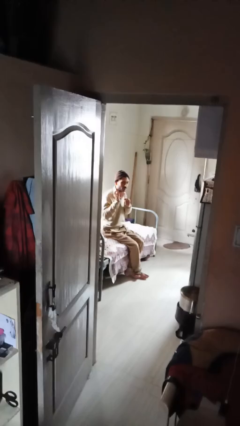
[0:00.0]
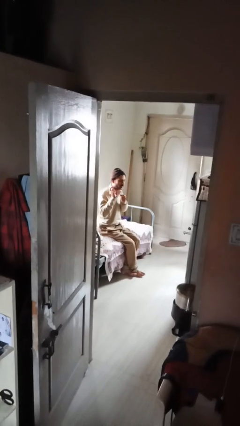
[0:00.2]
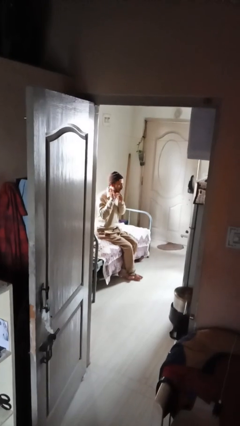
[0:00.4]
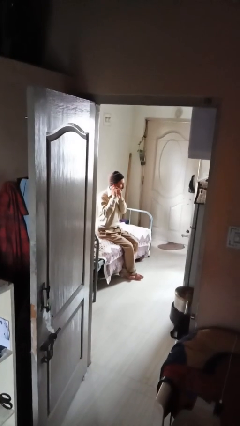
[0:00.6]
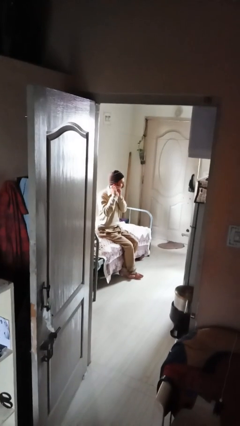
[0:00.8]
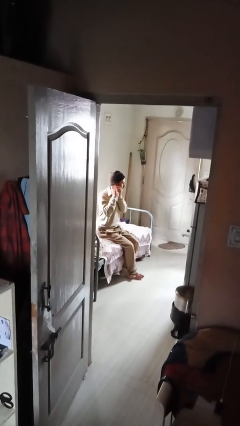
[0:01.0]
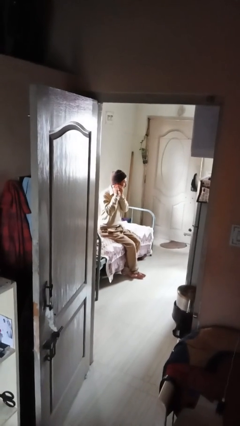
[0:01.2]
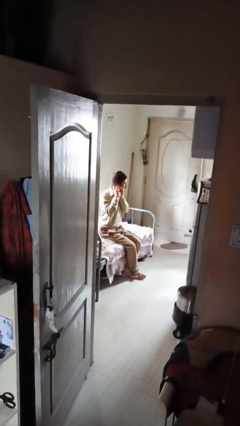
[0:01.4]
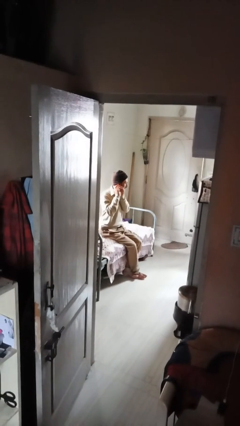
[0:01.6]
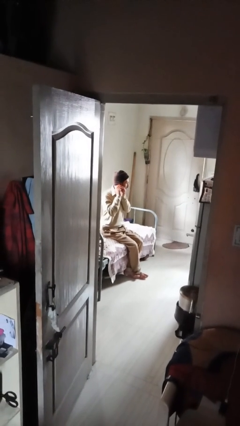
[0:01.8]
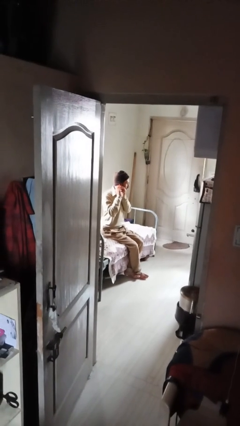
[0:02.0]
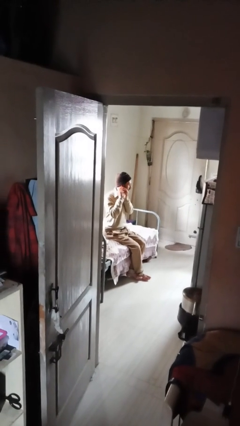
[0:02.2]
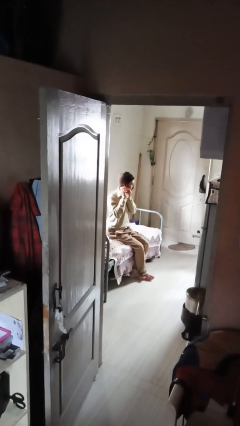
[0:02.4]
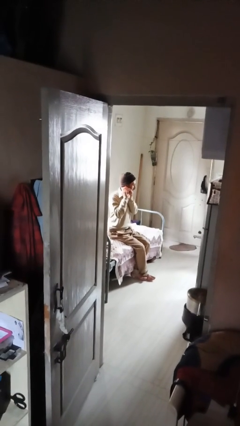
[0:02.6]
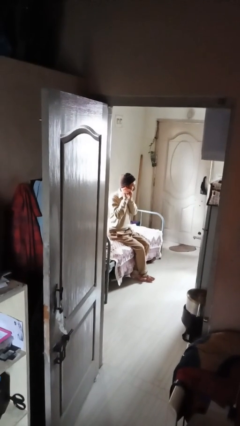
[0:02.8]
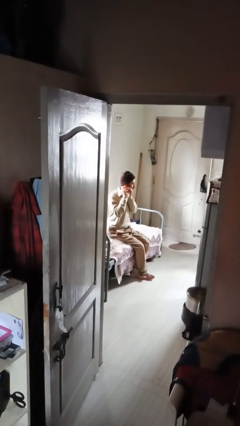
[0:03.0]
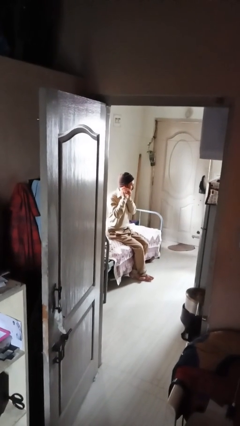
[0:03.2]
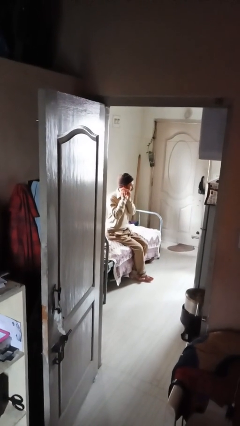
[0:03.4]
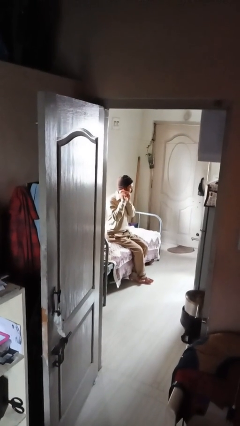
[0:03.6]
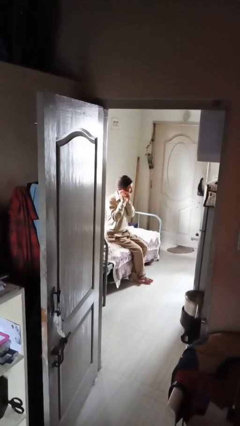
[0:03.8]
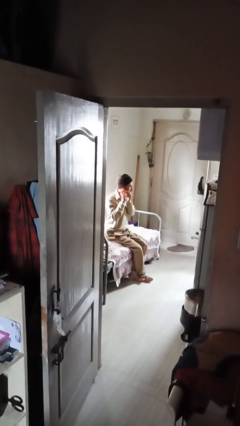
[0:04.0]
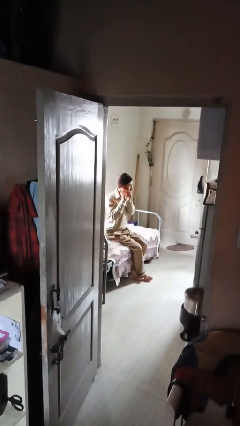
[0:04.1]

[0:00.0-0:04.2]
person puts on earrings

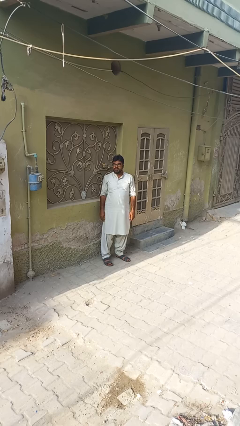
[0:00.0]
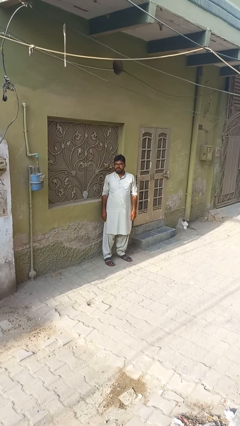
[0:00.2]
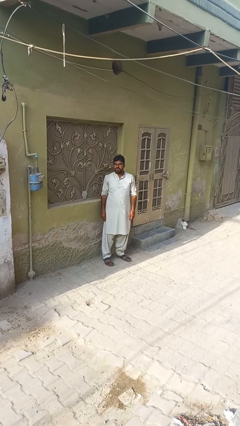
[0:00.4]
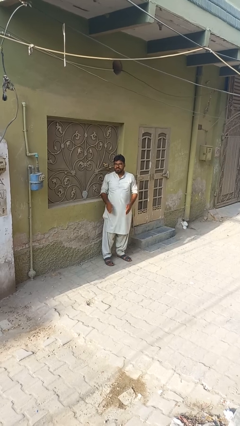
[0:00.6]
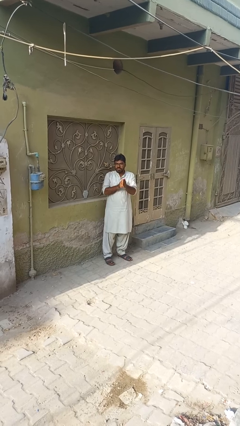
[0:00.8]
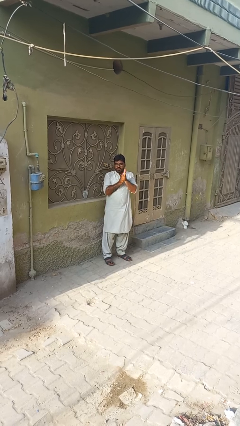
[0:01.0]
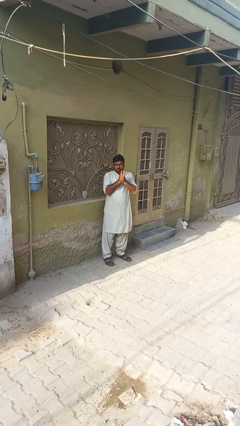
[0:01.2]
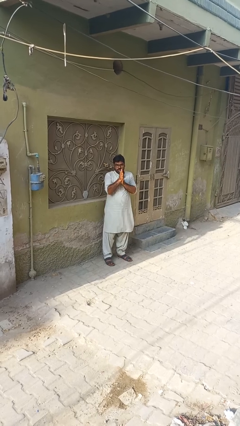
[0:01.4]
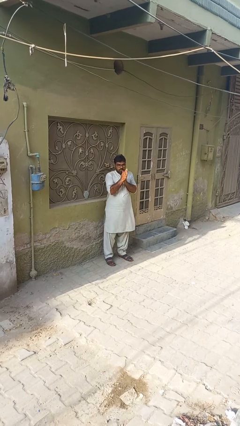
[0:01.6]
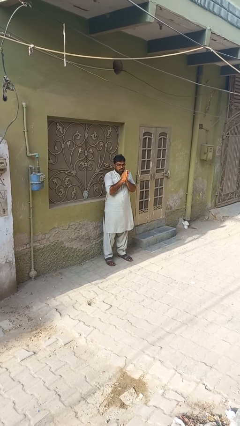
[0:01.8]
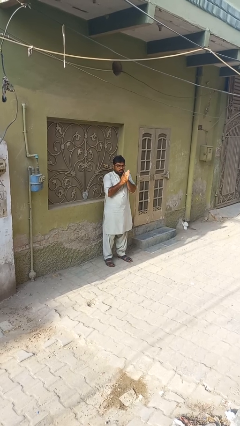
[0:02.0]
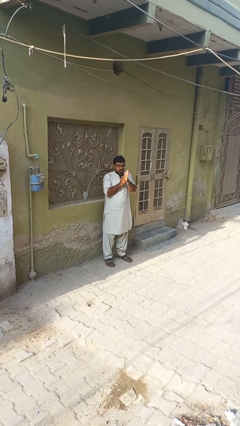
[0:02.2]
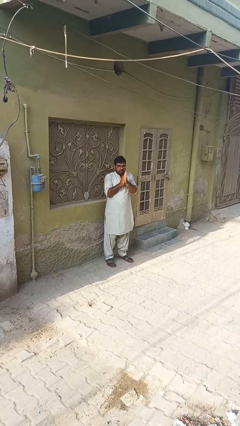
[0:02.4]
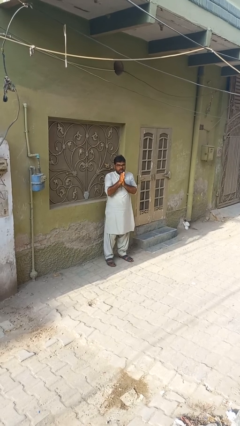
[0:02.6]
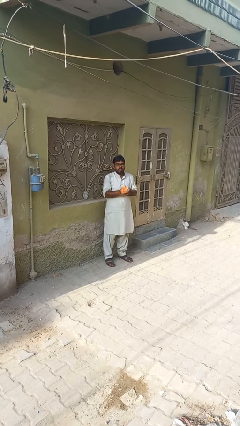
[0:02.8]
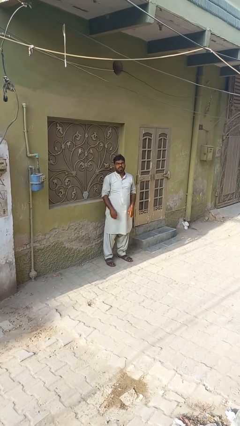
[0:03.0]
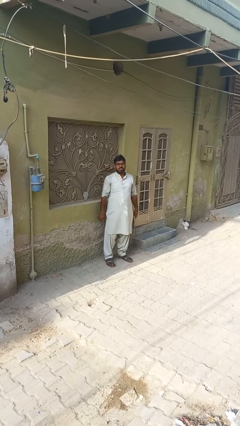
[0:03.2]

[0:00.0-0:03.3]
person blows into hands

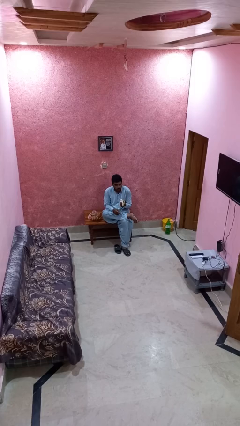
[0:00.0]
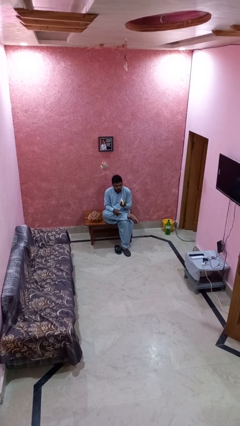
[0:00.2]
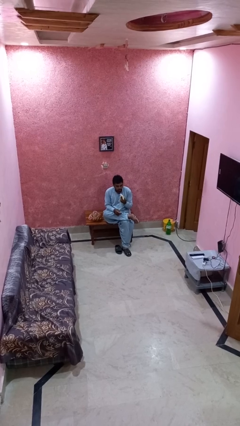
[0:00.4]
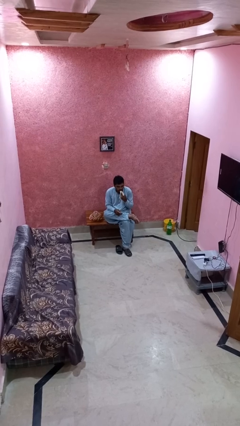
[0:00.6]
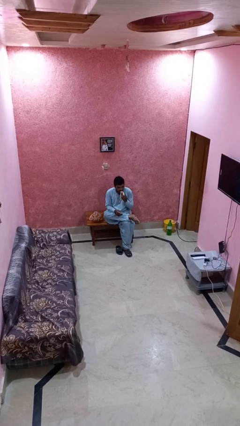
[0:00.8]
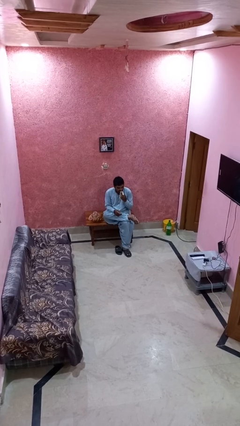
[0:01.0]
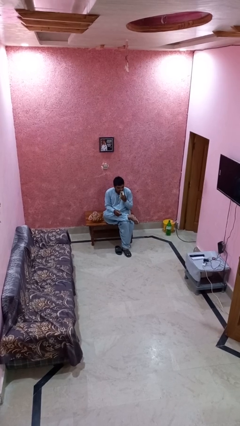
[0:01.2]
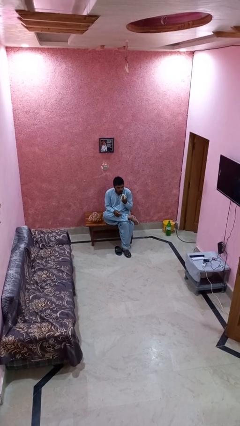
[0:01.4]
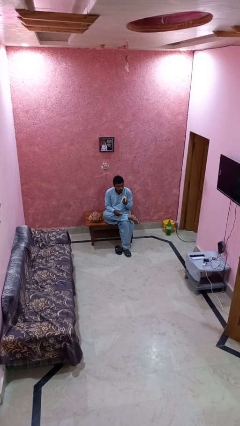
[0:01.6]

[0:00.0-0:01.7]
person eats banana

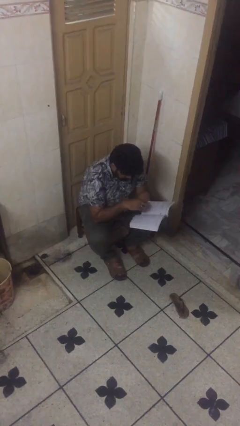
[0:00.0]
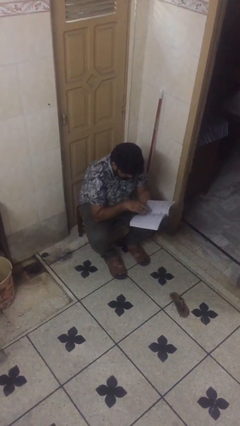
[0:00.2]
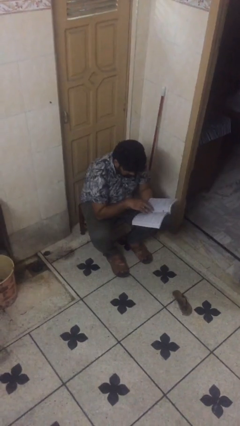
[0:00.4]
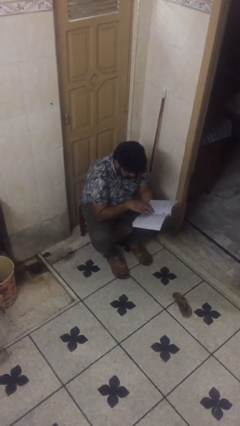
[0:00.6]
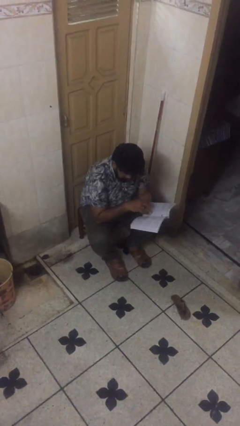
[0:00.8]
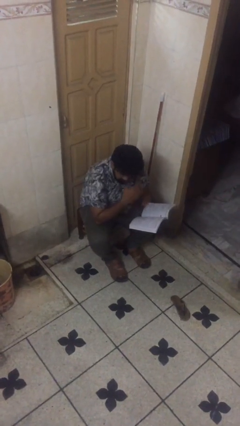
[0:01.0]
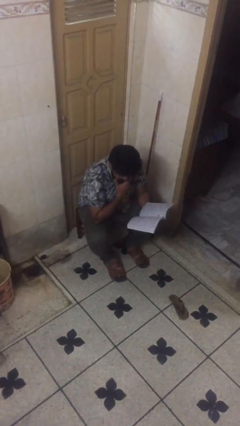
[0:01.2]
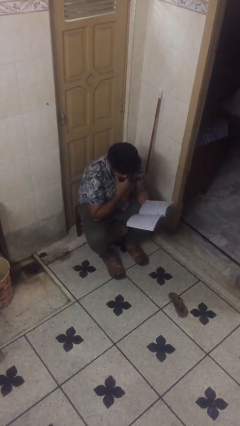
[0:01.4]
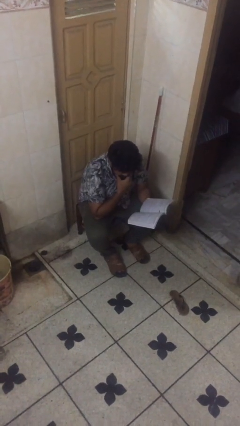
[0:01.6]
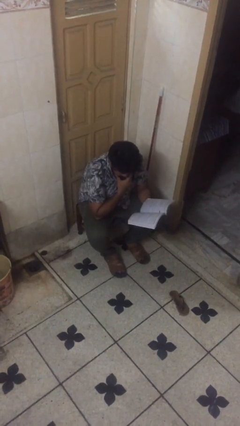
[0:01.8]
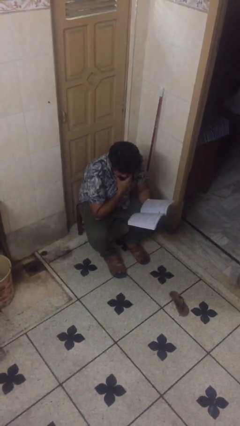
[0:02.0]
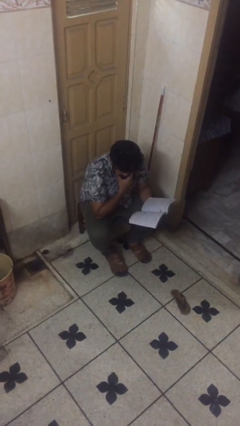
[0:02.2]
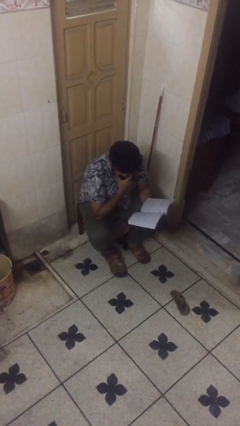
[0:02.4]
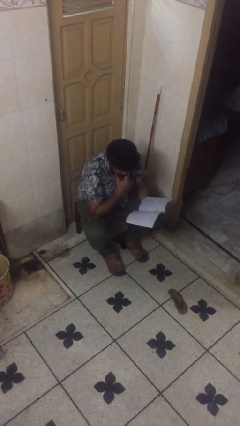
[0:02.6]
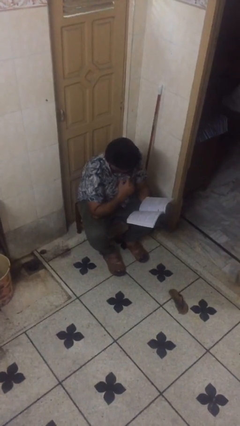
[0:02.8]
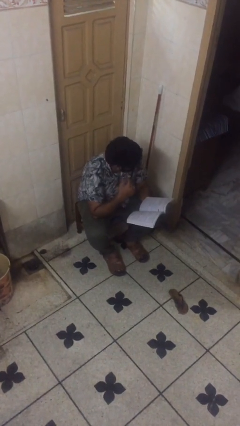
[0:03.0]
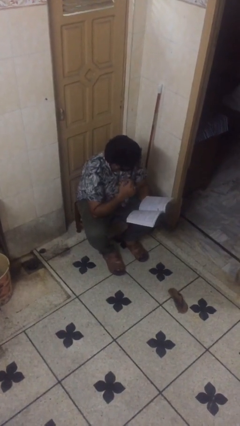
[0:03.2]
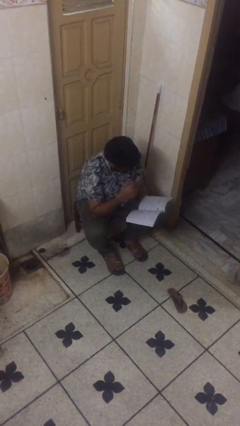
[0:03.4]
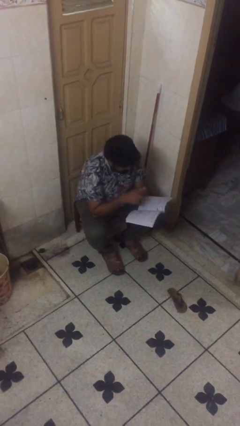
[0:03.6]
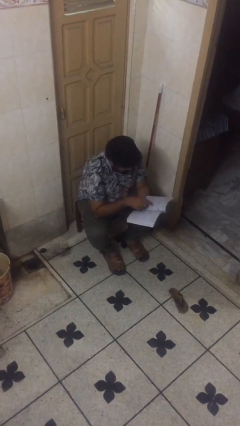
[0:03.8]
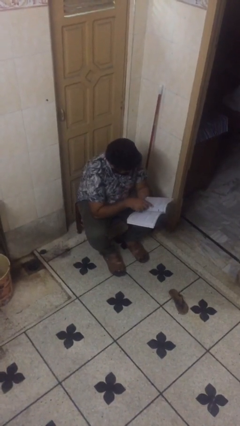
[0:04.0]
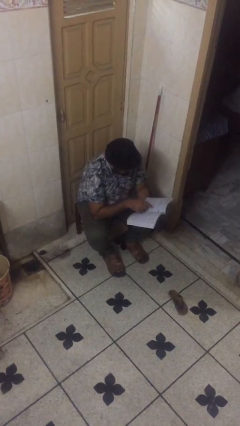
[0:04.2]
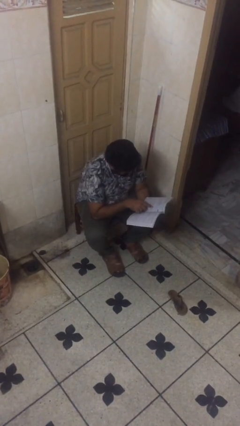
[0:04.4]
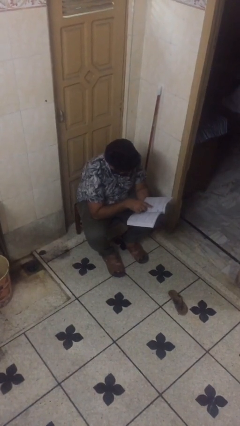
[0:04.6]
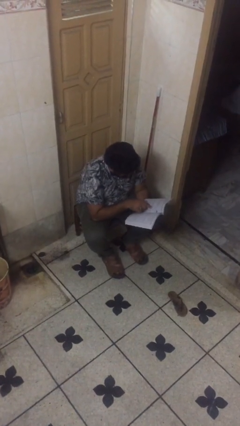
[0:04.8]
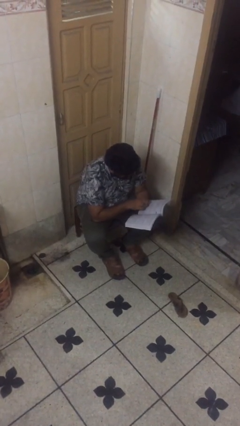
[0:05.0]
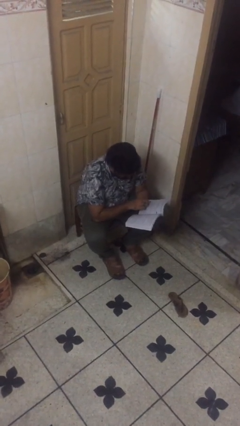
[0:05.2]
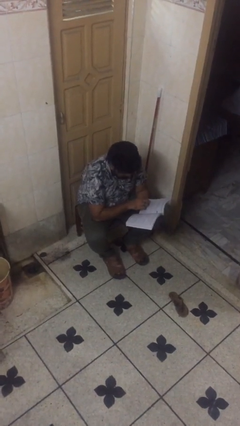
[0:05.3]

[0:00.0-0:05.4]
person reads document

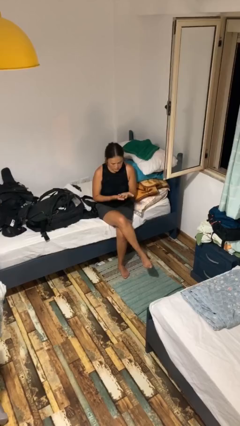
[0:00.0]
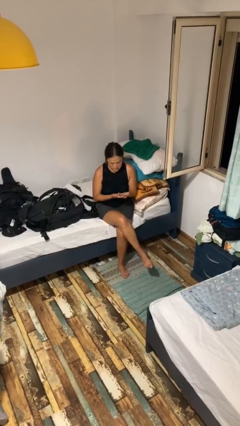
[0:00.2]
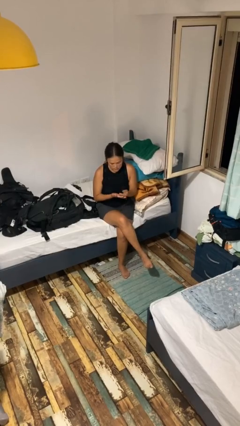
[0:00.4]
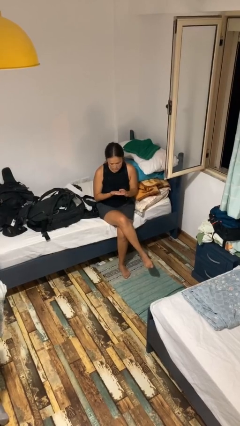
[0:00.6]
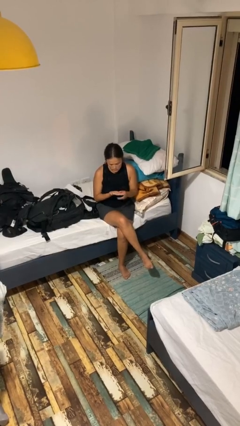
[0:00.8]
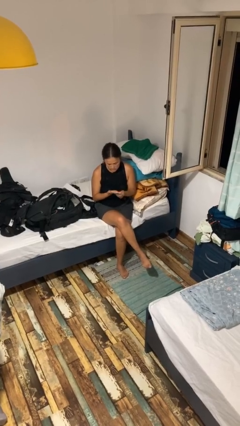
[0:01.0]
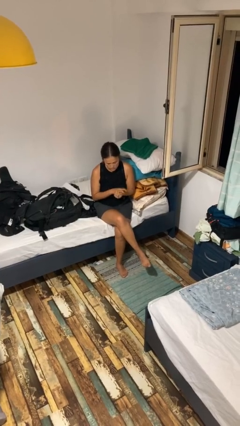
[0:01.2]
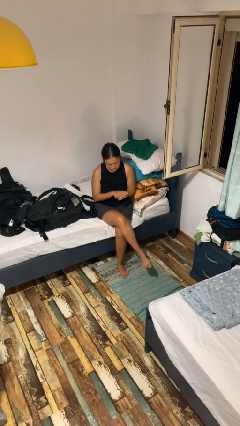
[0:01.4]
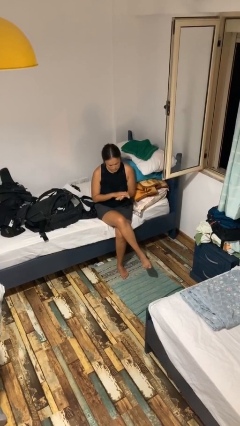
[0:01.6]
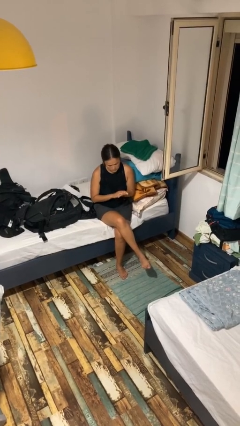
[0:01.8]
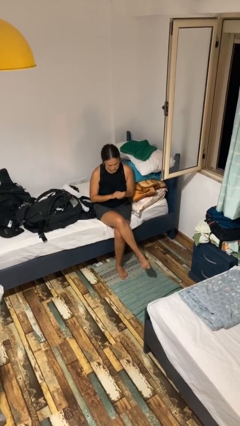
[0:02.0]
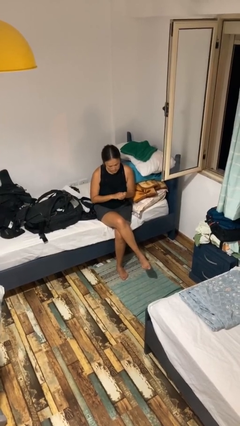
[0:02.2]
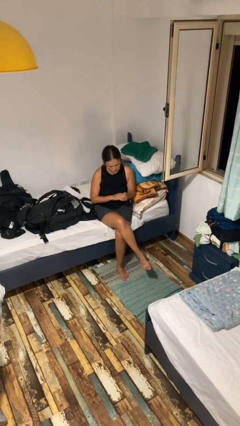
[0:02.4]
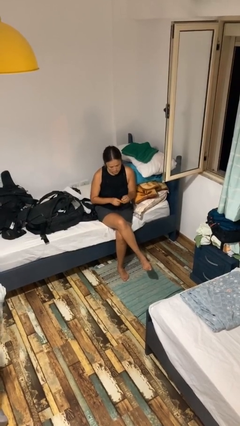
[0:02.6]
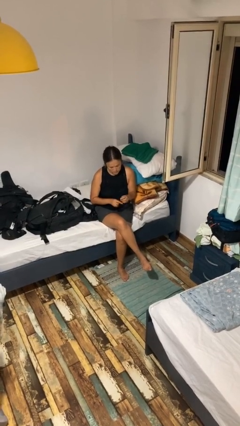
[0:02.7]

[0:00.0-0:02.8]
person looks at hands in lap

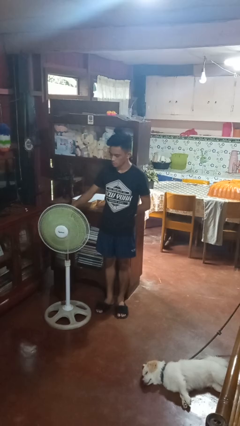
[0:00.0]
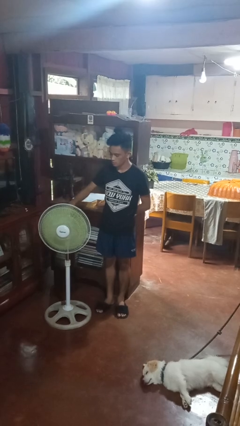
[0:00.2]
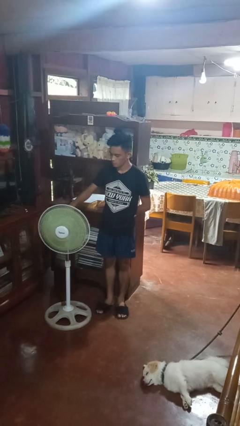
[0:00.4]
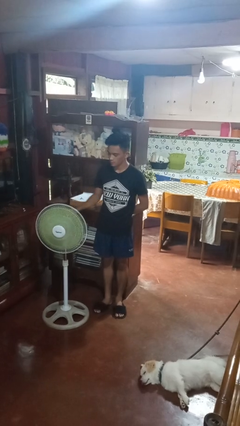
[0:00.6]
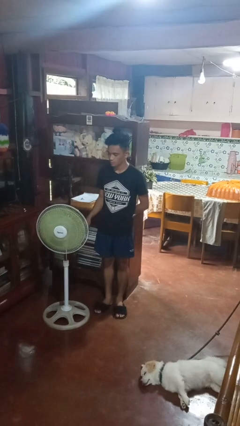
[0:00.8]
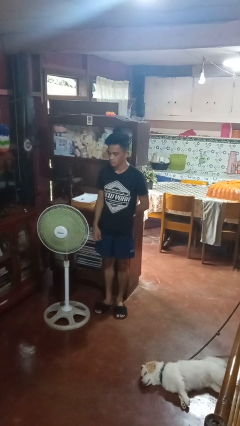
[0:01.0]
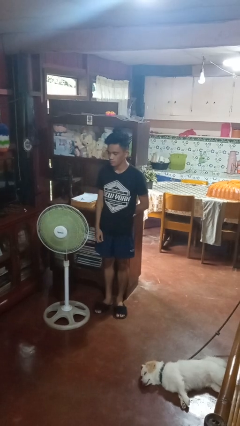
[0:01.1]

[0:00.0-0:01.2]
person turns off fan
